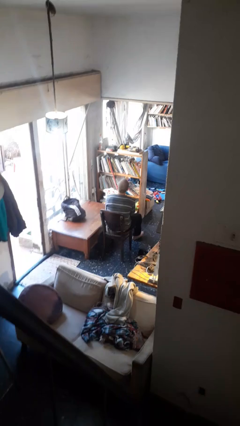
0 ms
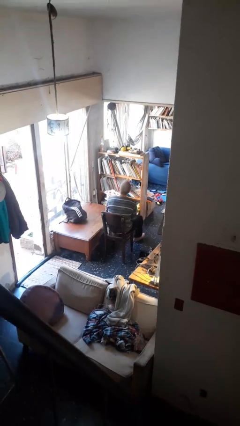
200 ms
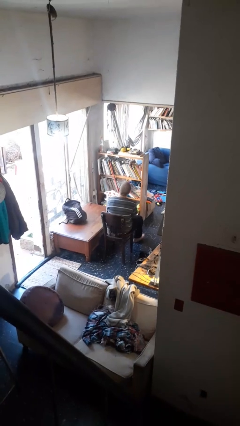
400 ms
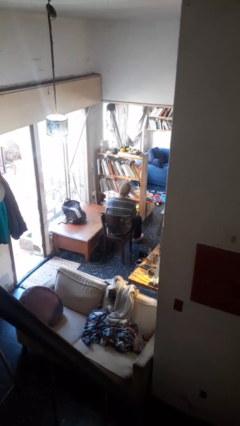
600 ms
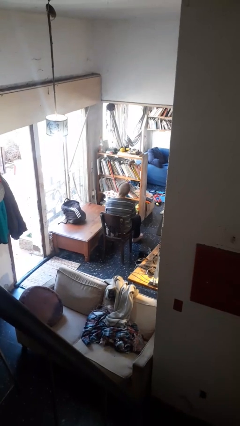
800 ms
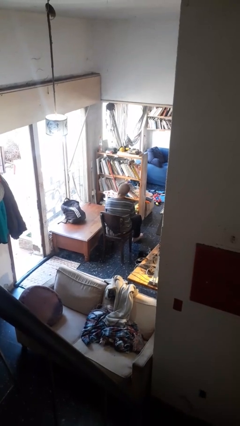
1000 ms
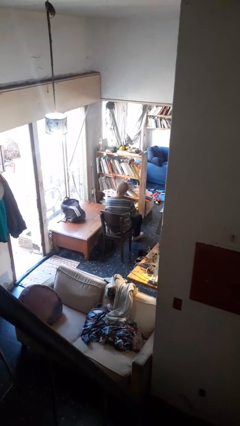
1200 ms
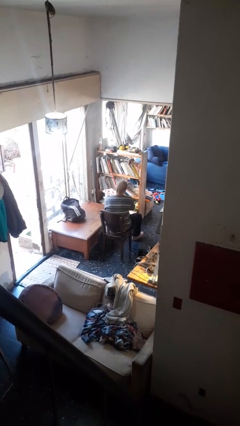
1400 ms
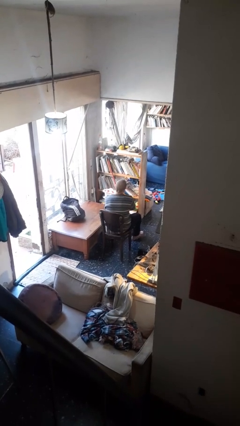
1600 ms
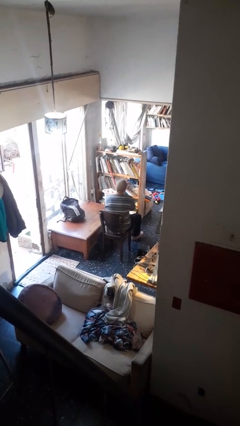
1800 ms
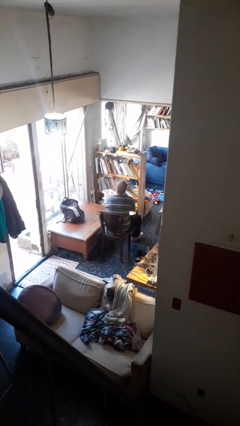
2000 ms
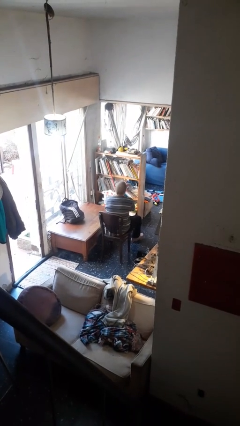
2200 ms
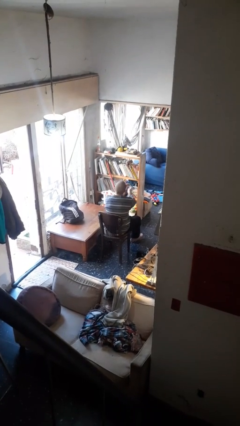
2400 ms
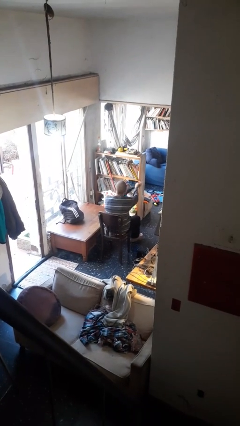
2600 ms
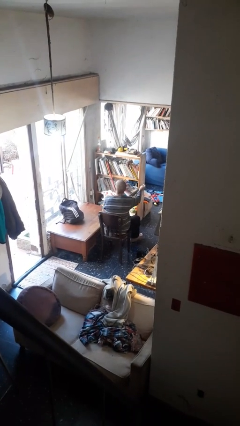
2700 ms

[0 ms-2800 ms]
person takes off socks

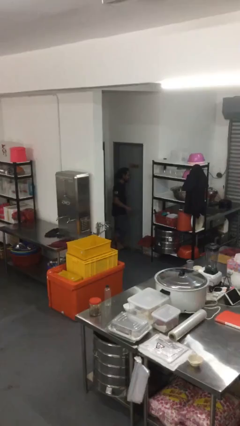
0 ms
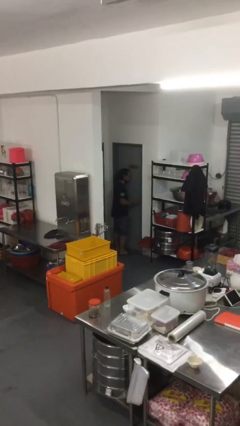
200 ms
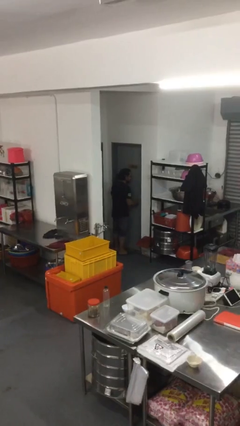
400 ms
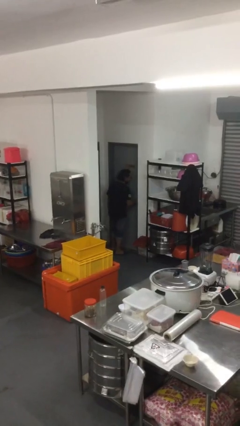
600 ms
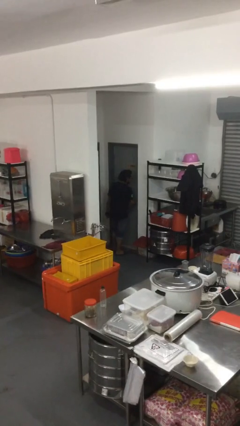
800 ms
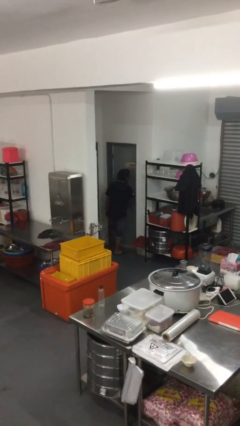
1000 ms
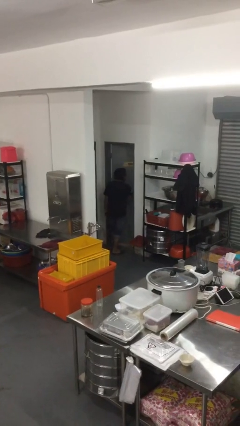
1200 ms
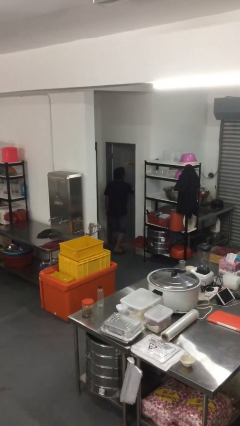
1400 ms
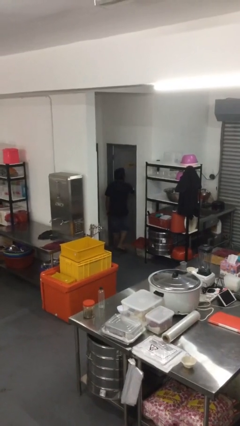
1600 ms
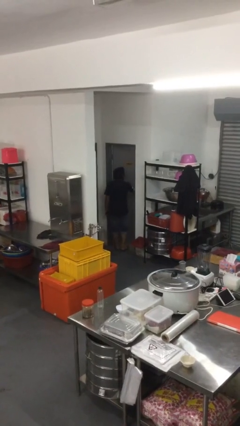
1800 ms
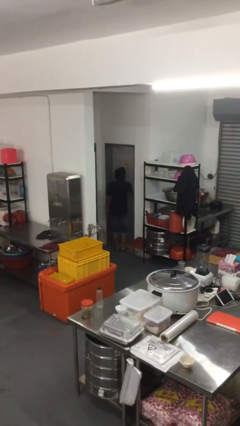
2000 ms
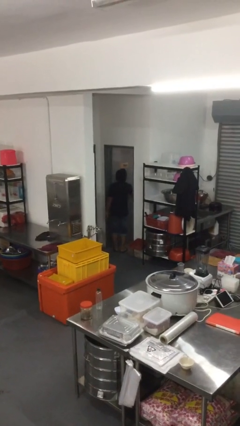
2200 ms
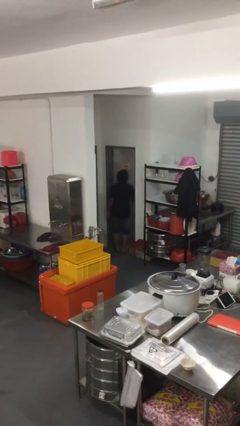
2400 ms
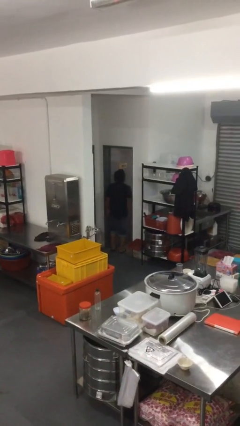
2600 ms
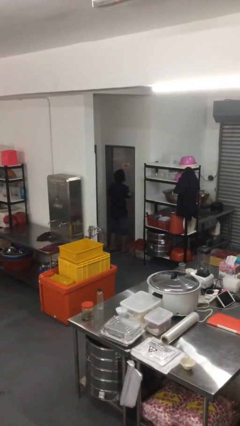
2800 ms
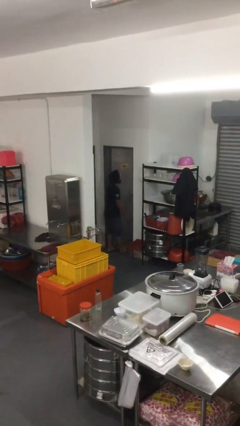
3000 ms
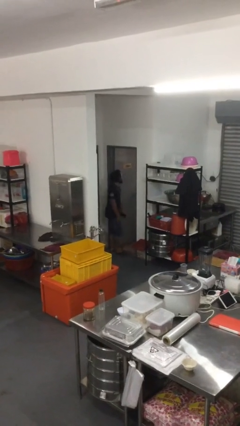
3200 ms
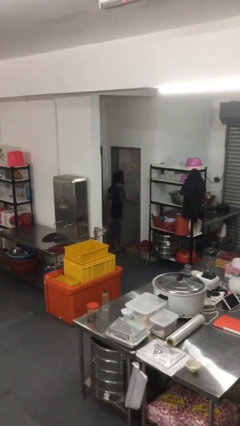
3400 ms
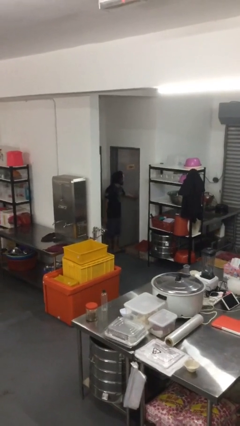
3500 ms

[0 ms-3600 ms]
person opens facility door

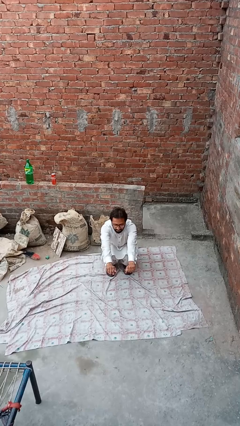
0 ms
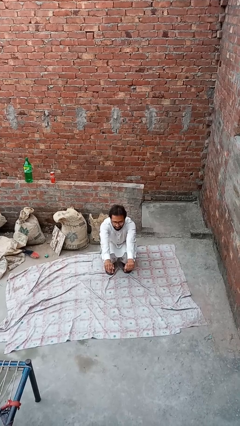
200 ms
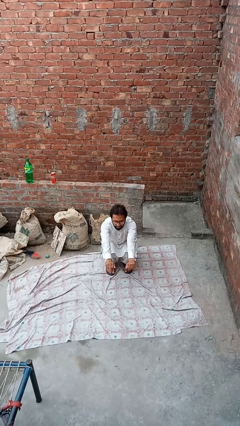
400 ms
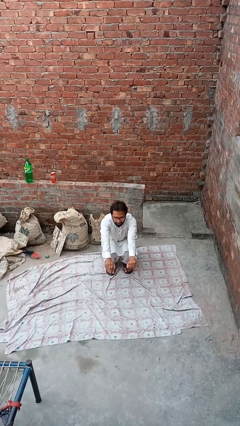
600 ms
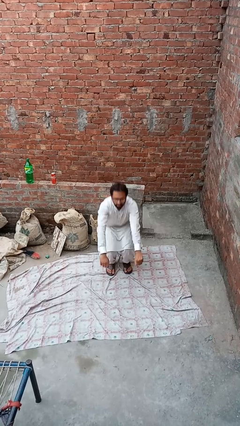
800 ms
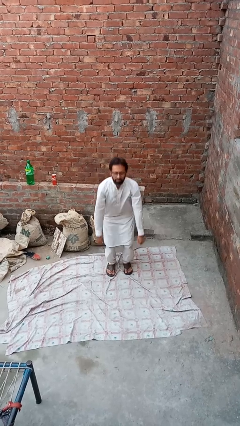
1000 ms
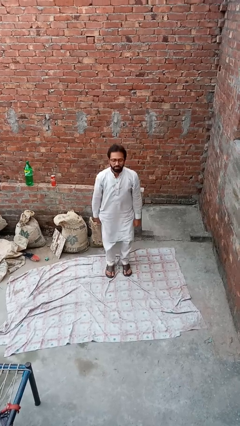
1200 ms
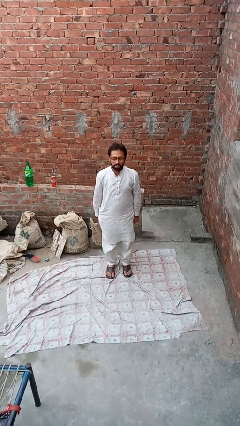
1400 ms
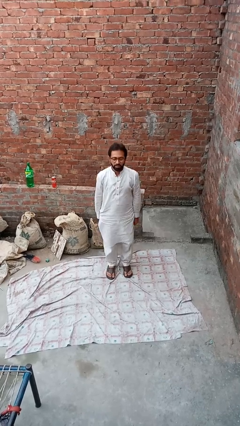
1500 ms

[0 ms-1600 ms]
person stands up

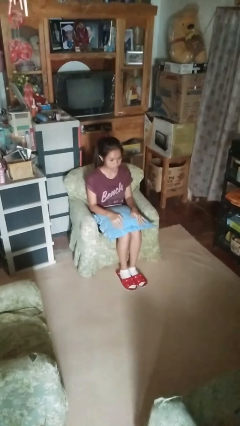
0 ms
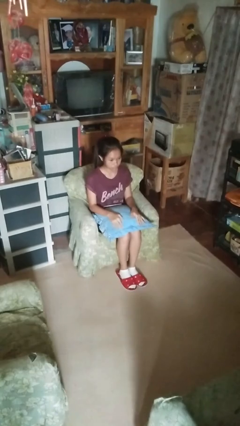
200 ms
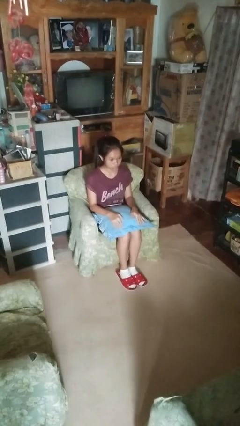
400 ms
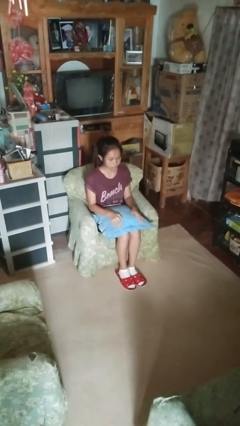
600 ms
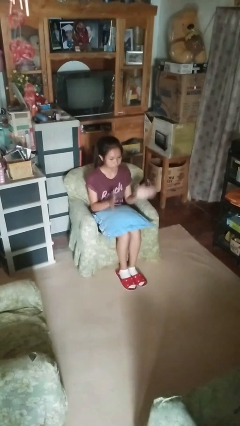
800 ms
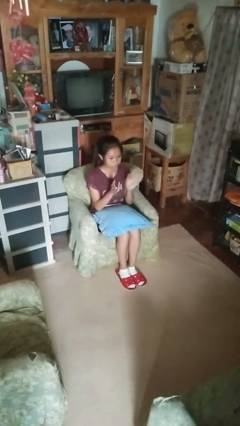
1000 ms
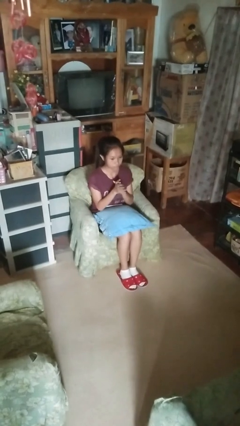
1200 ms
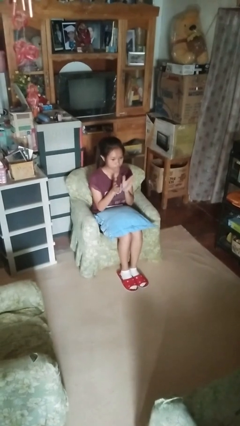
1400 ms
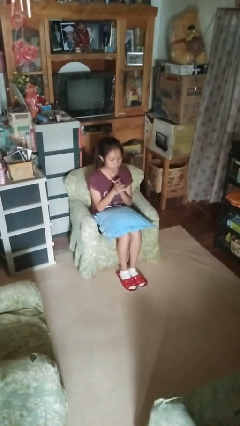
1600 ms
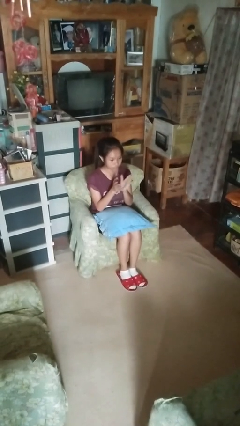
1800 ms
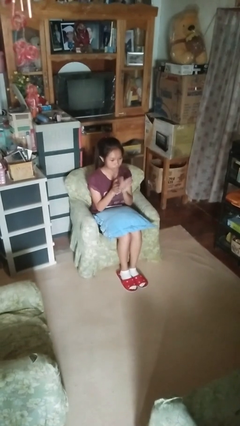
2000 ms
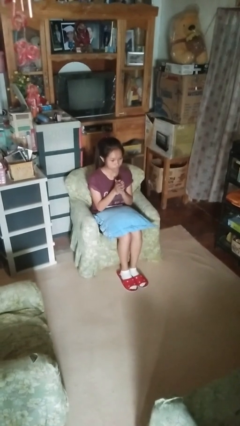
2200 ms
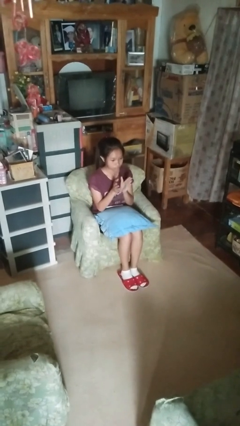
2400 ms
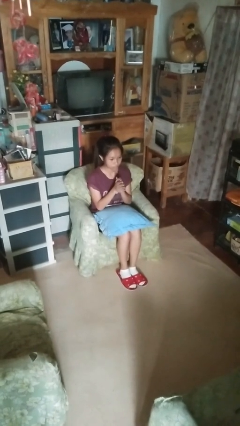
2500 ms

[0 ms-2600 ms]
person claps hands

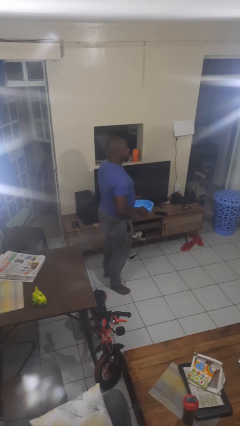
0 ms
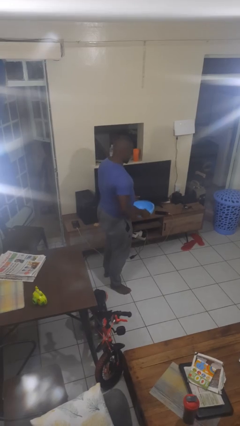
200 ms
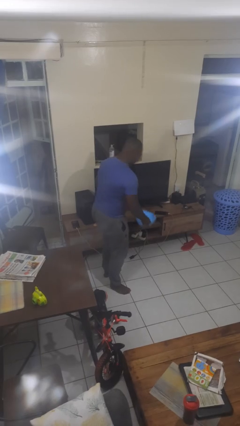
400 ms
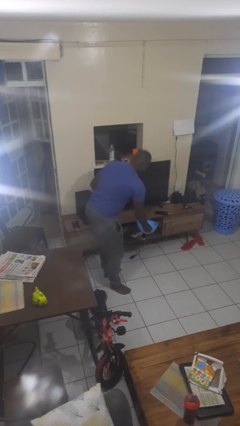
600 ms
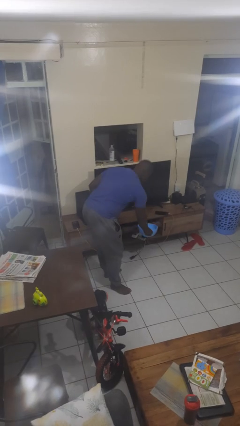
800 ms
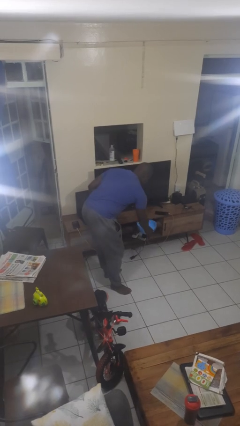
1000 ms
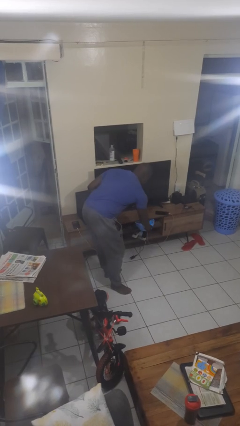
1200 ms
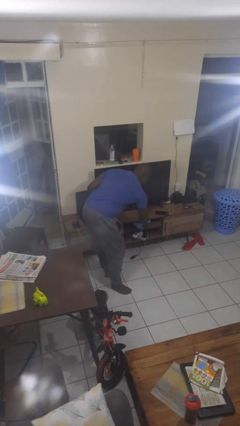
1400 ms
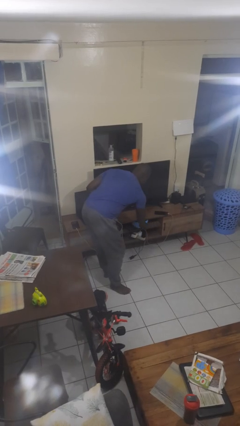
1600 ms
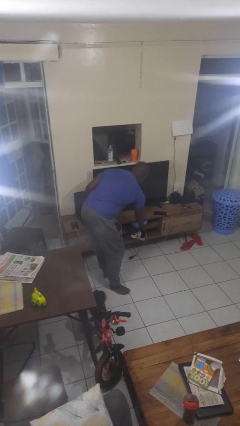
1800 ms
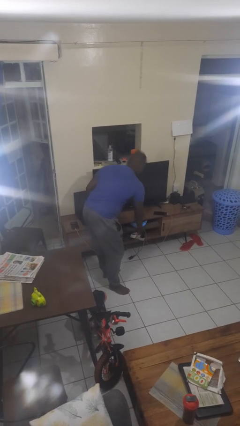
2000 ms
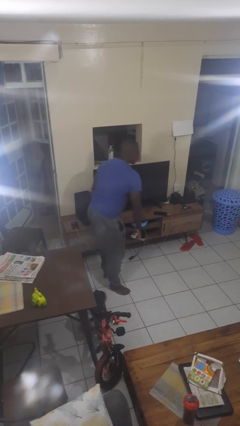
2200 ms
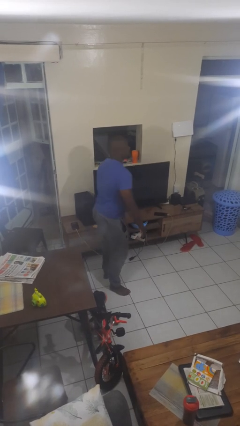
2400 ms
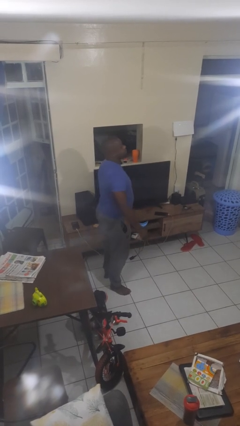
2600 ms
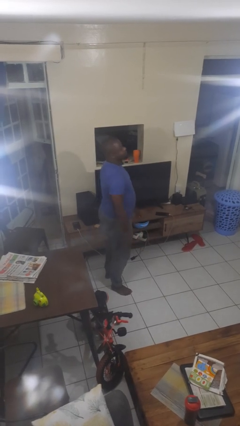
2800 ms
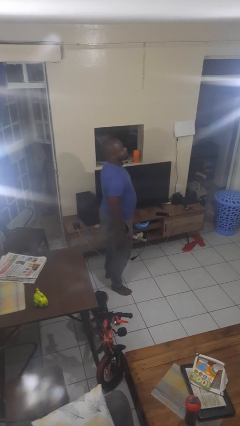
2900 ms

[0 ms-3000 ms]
person puts down object into cabinet

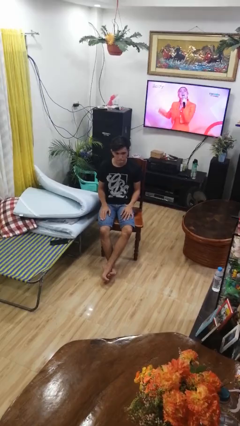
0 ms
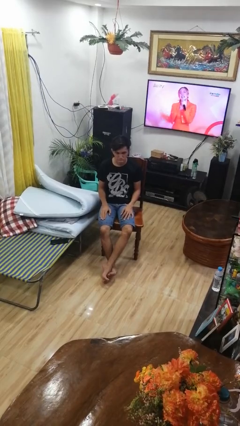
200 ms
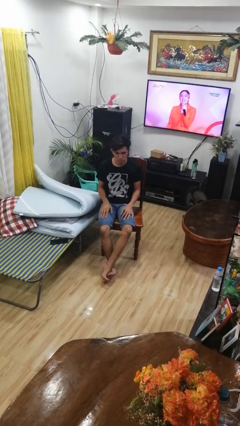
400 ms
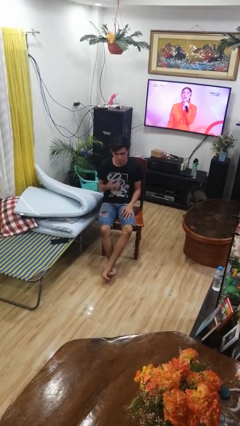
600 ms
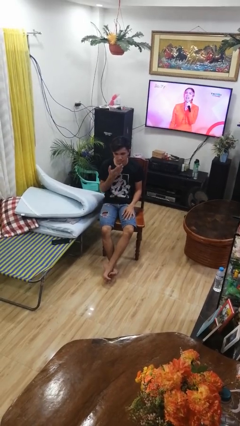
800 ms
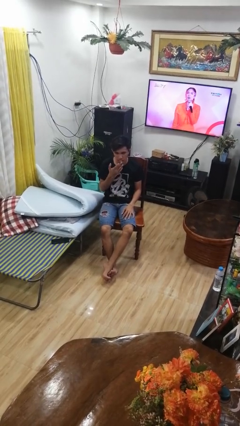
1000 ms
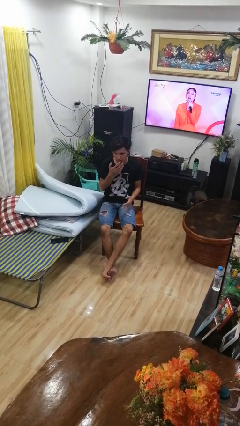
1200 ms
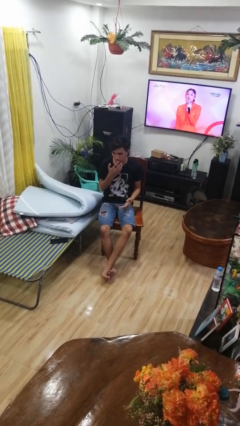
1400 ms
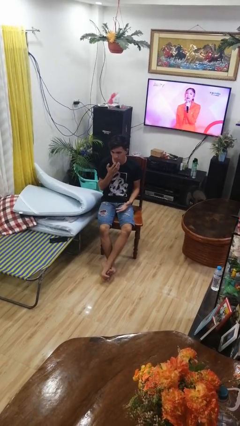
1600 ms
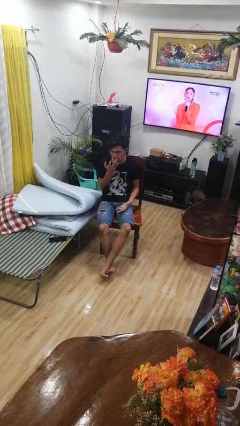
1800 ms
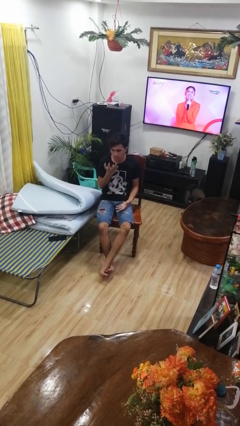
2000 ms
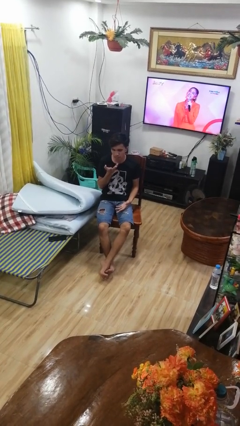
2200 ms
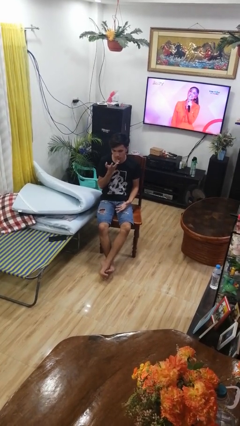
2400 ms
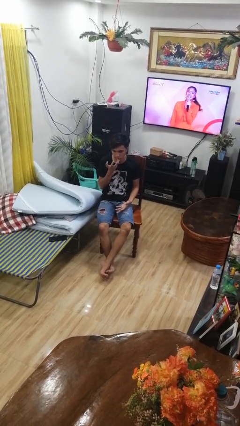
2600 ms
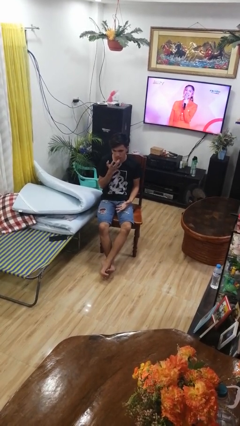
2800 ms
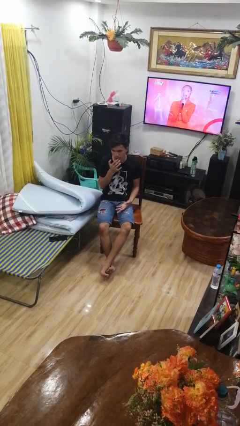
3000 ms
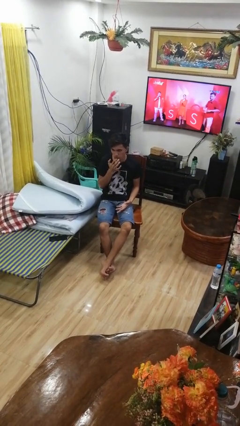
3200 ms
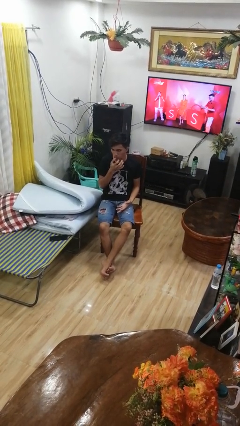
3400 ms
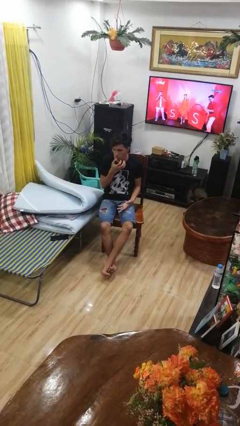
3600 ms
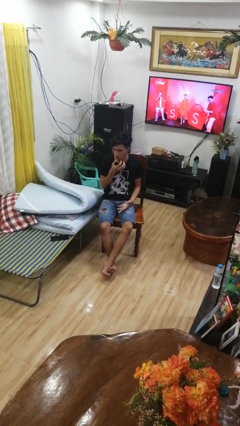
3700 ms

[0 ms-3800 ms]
person licks fingers

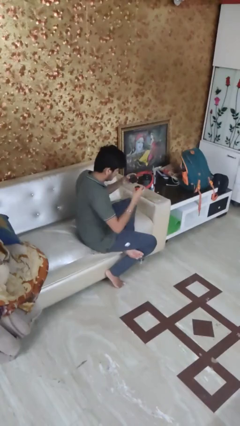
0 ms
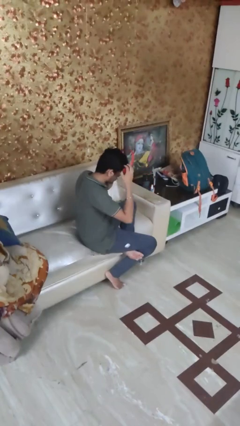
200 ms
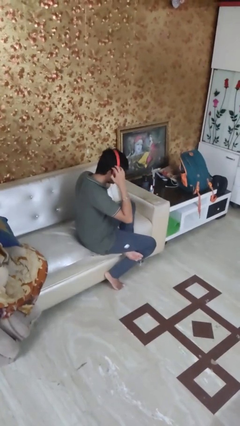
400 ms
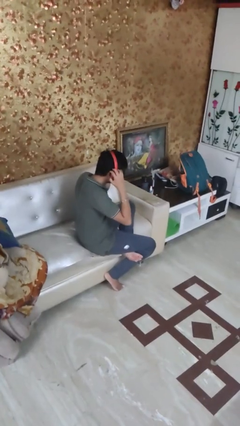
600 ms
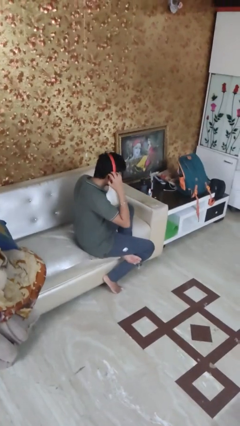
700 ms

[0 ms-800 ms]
person puts on headphones
